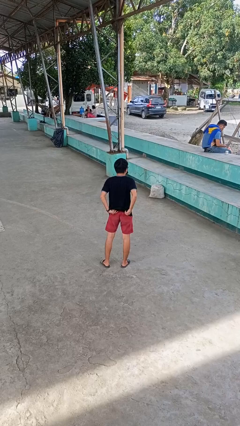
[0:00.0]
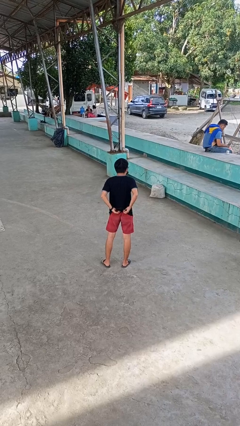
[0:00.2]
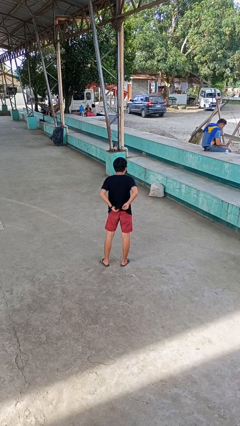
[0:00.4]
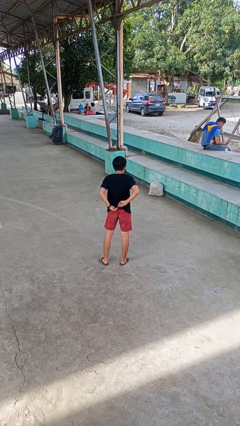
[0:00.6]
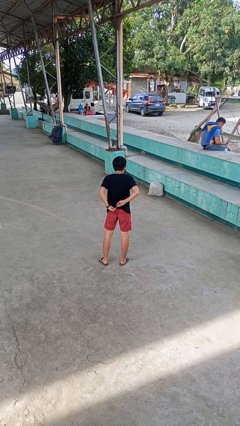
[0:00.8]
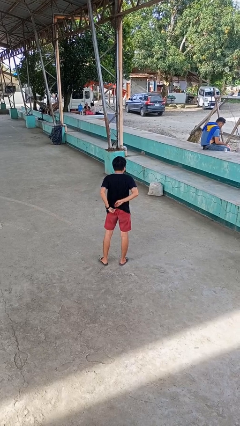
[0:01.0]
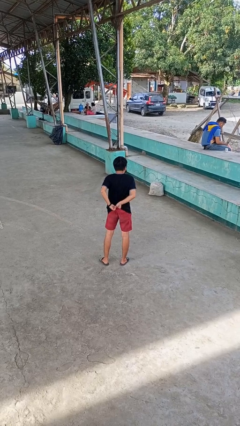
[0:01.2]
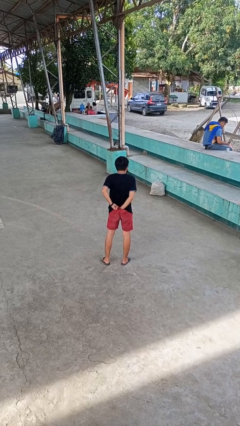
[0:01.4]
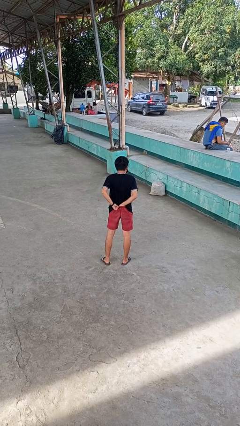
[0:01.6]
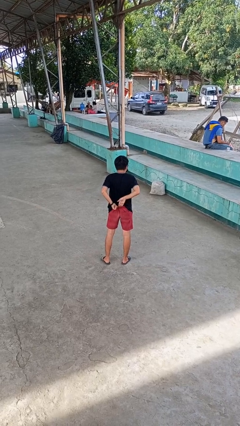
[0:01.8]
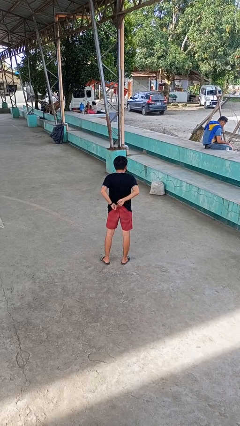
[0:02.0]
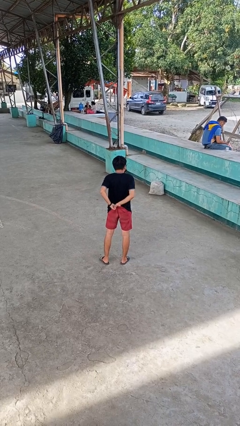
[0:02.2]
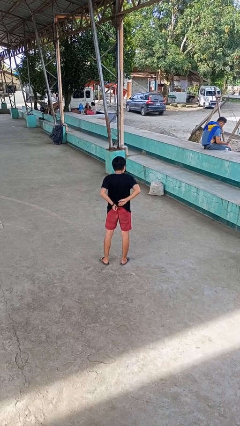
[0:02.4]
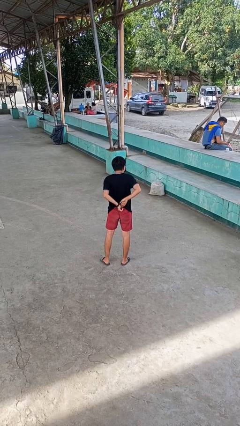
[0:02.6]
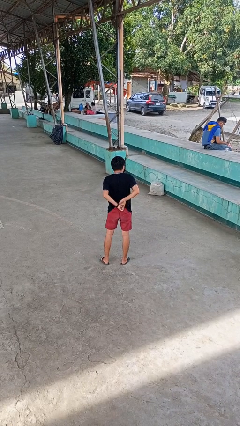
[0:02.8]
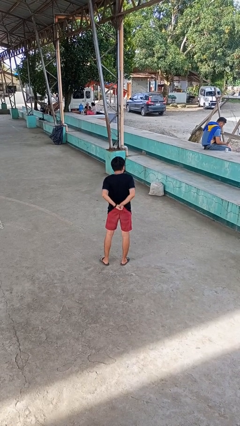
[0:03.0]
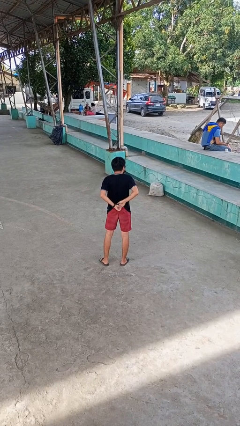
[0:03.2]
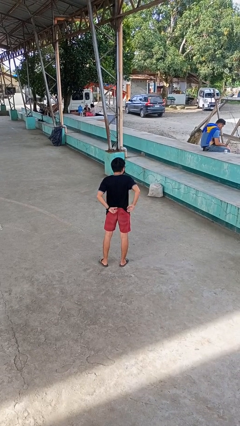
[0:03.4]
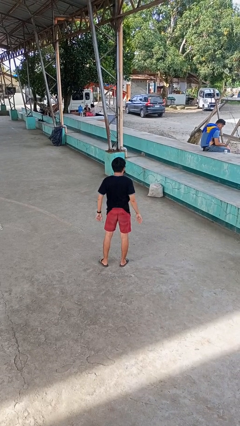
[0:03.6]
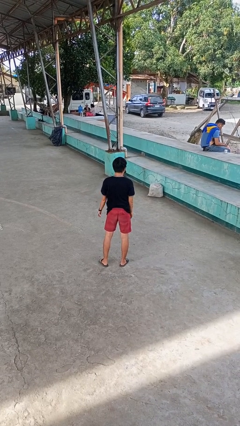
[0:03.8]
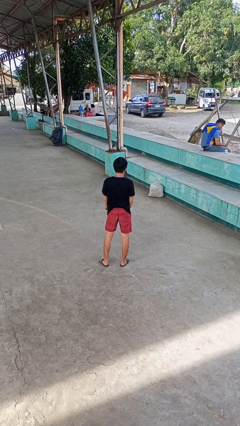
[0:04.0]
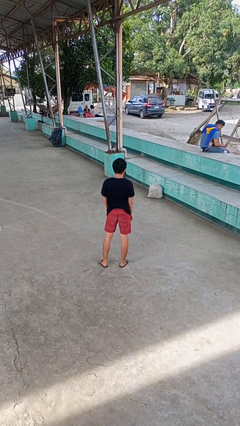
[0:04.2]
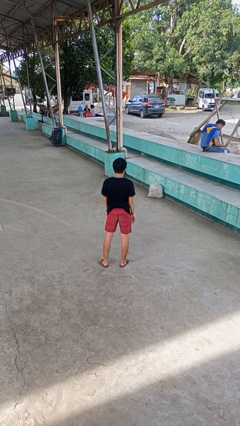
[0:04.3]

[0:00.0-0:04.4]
person tucks in shirt

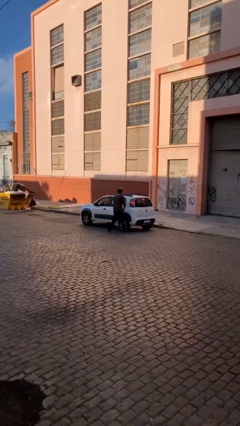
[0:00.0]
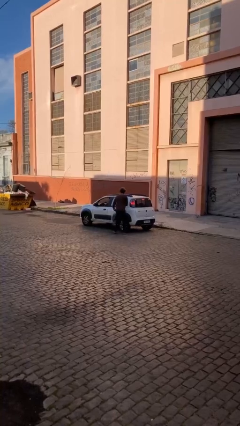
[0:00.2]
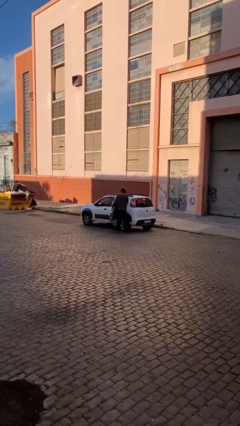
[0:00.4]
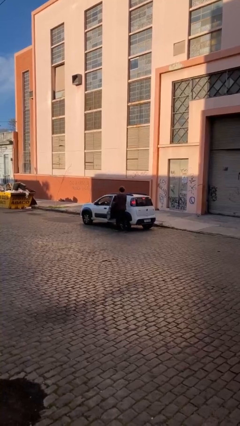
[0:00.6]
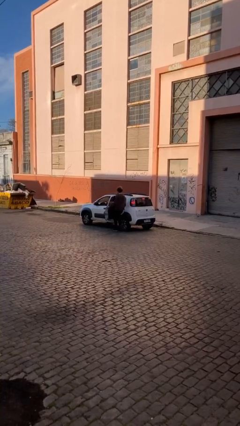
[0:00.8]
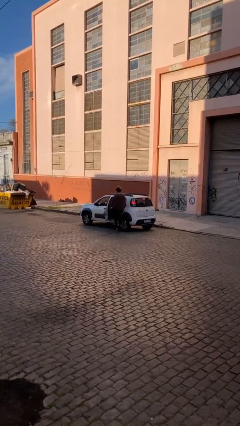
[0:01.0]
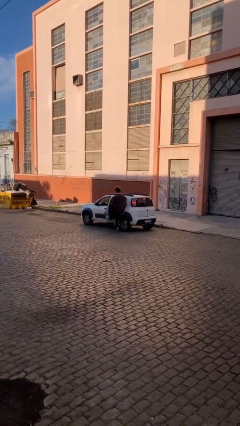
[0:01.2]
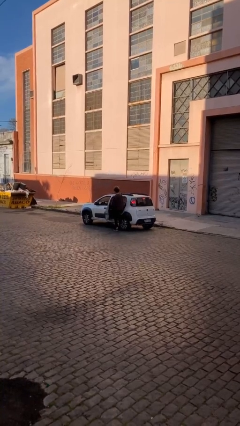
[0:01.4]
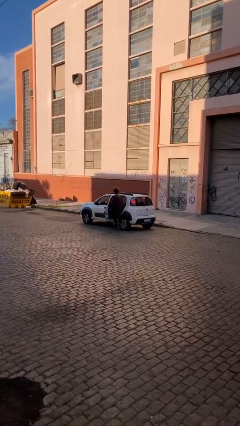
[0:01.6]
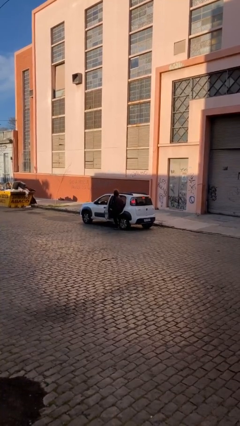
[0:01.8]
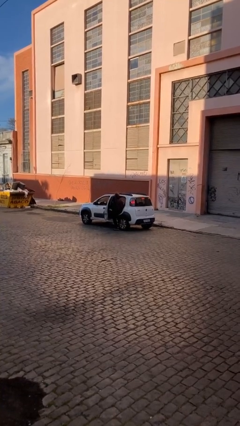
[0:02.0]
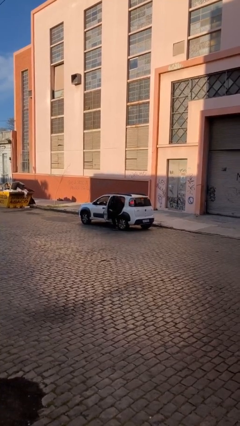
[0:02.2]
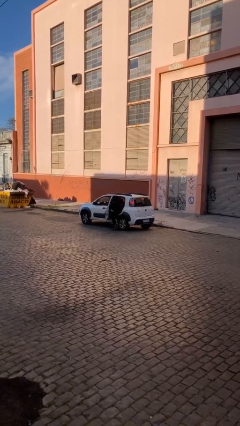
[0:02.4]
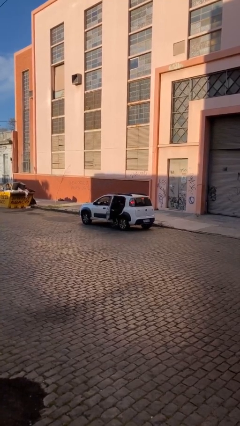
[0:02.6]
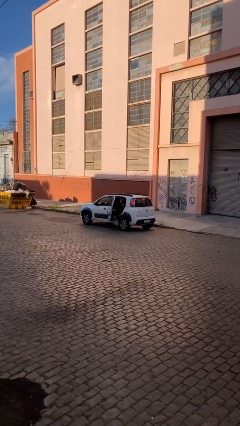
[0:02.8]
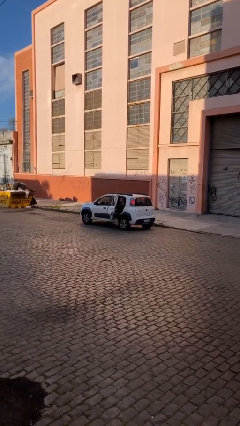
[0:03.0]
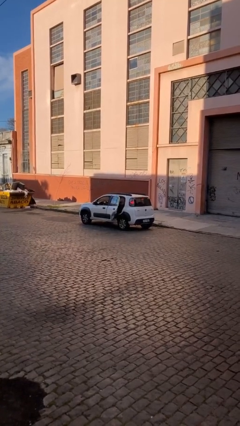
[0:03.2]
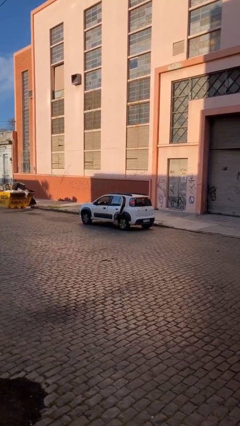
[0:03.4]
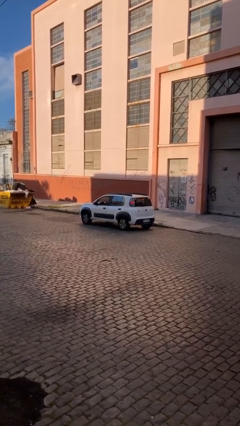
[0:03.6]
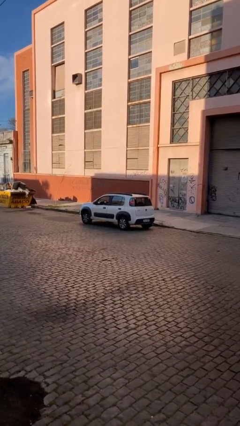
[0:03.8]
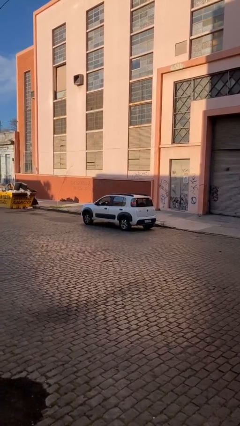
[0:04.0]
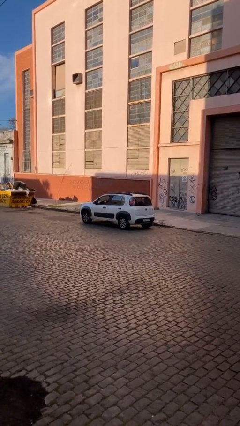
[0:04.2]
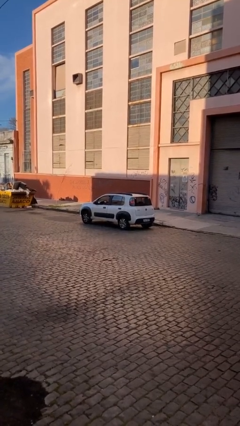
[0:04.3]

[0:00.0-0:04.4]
car picks up person

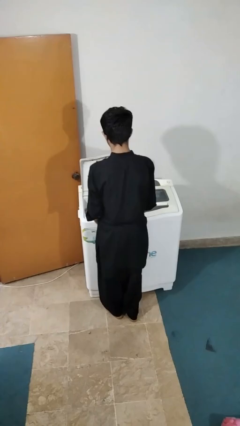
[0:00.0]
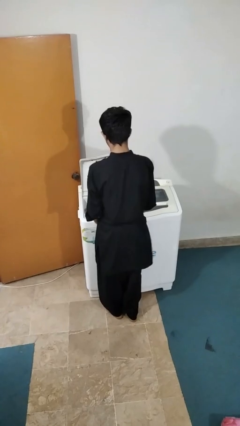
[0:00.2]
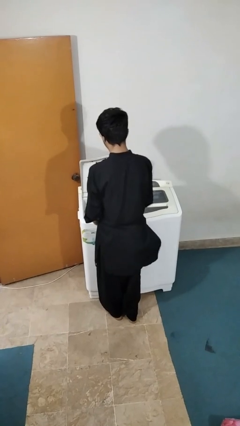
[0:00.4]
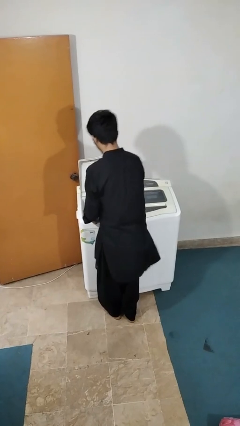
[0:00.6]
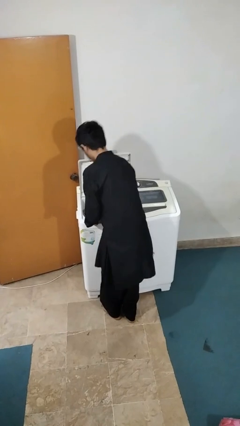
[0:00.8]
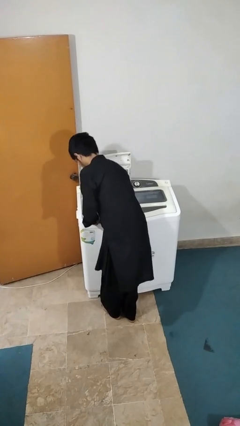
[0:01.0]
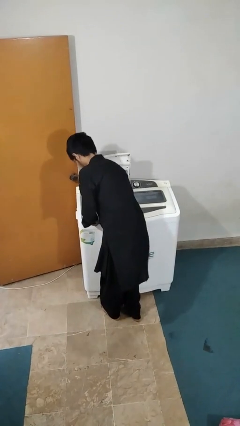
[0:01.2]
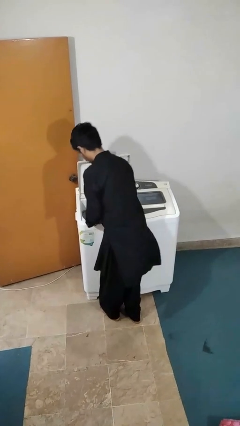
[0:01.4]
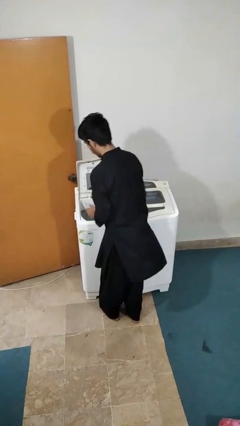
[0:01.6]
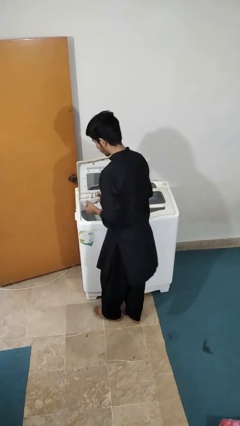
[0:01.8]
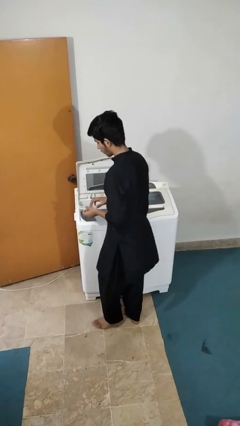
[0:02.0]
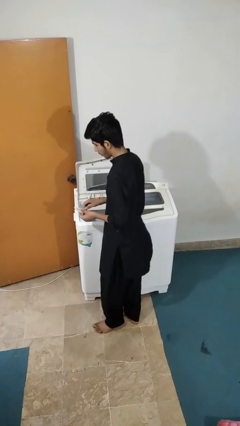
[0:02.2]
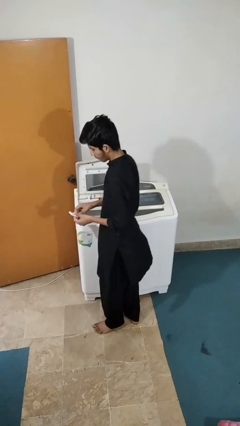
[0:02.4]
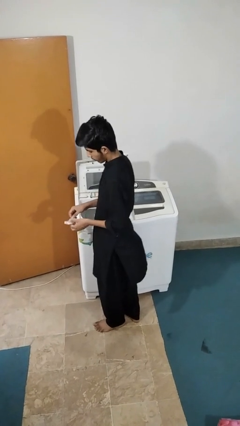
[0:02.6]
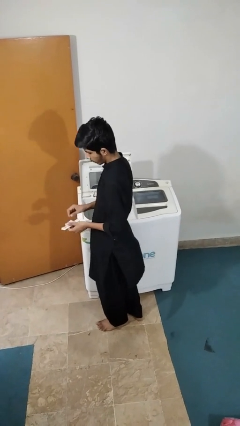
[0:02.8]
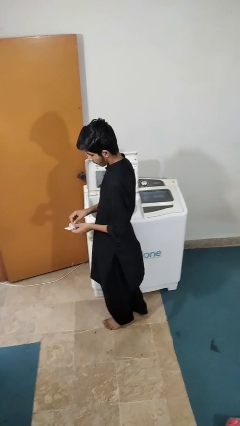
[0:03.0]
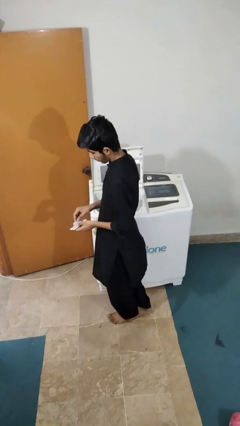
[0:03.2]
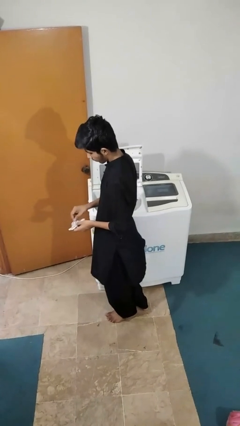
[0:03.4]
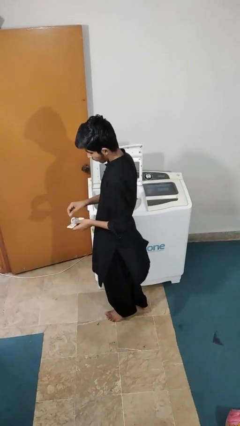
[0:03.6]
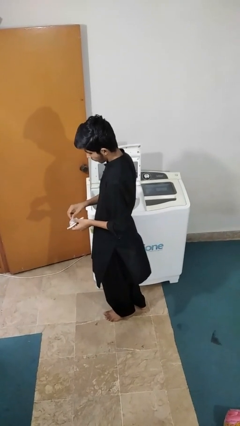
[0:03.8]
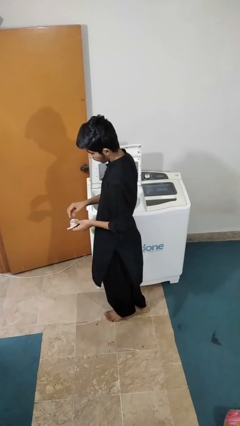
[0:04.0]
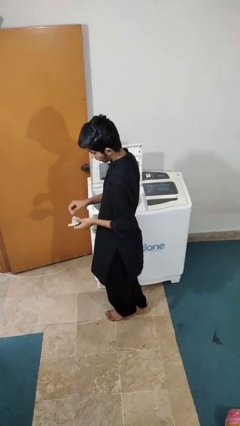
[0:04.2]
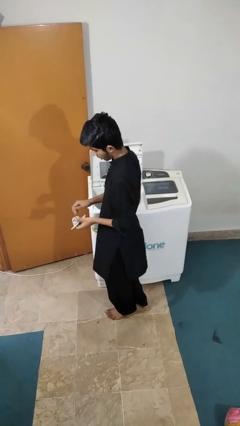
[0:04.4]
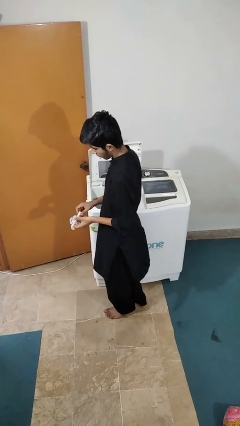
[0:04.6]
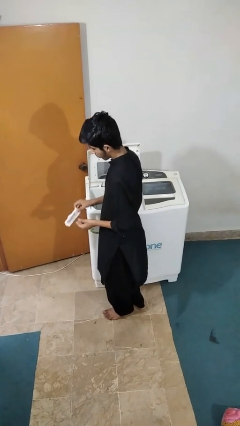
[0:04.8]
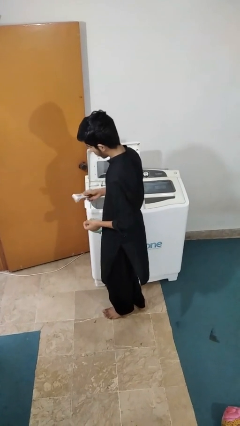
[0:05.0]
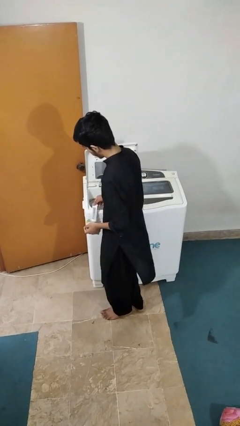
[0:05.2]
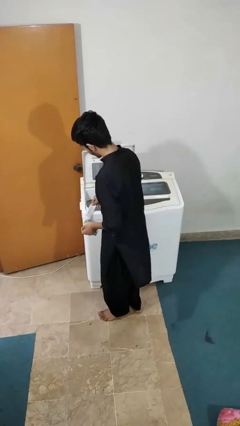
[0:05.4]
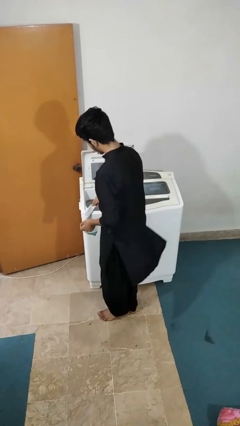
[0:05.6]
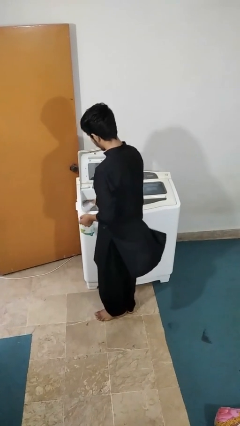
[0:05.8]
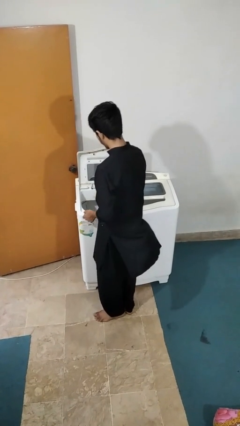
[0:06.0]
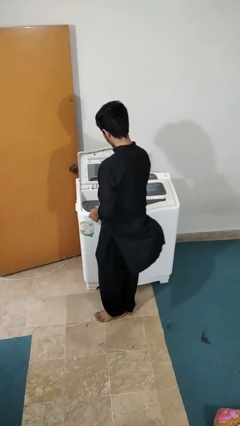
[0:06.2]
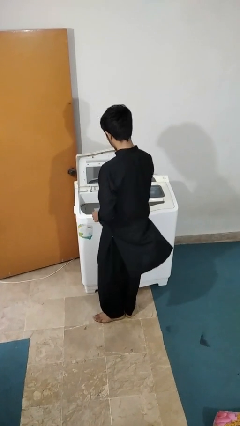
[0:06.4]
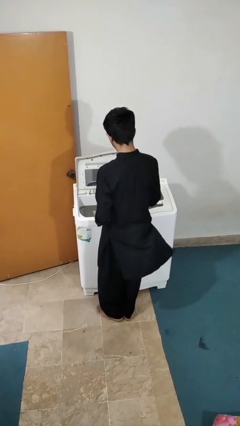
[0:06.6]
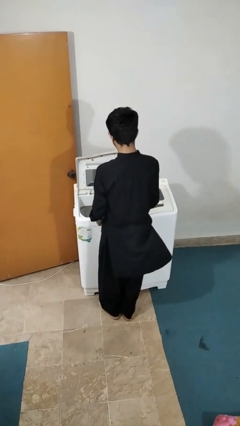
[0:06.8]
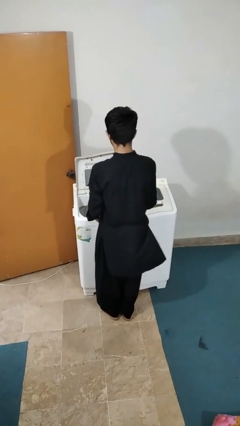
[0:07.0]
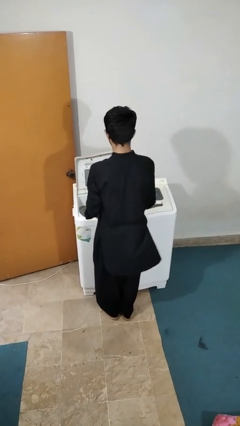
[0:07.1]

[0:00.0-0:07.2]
person cleans dryer lint trap

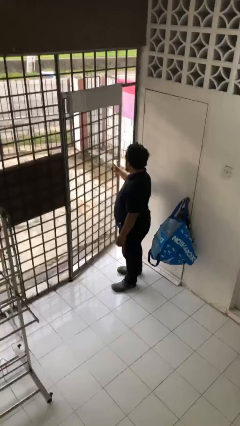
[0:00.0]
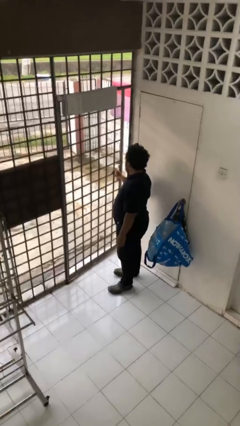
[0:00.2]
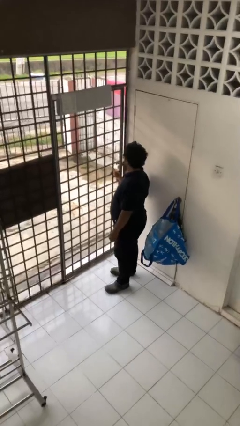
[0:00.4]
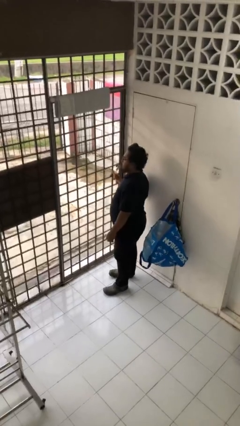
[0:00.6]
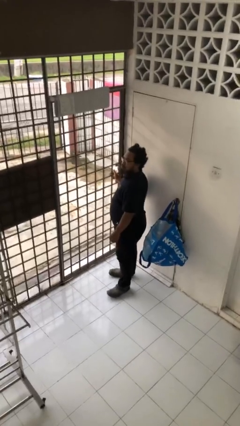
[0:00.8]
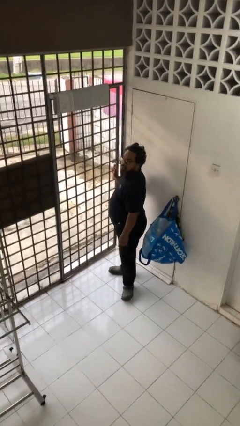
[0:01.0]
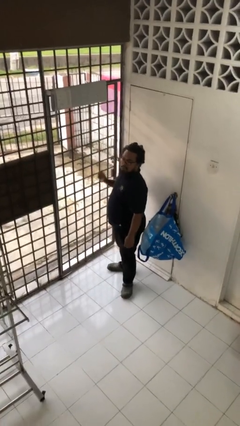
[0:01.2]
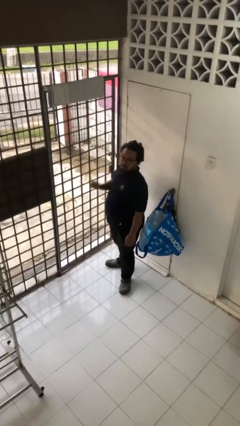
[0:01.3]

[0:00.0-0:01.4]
person closes facility door
